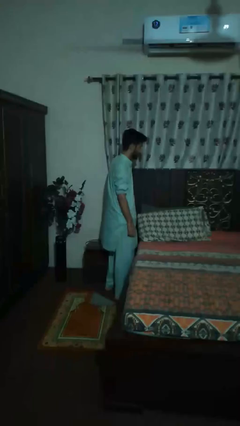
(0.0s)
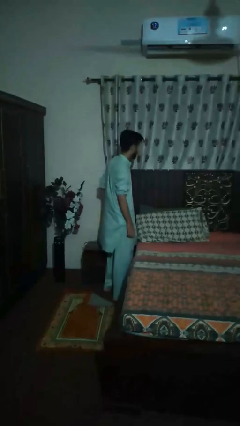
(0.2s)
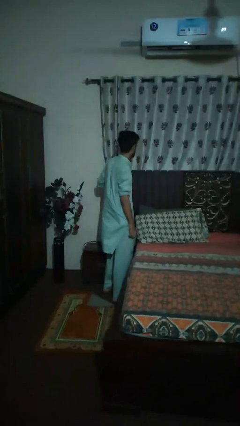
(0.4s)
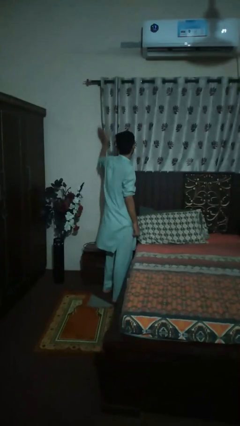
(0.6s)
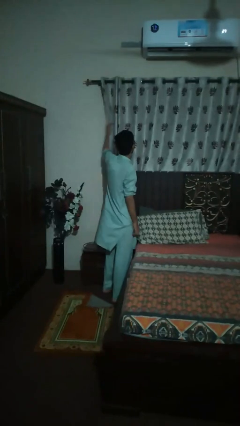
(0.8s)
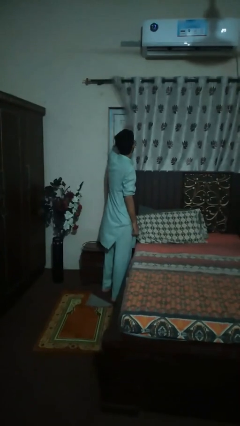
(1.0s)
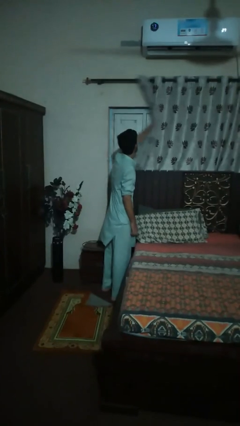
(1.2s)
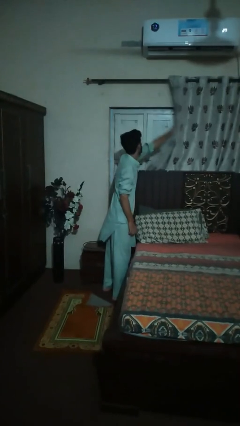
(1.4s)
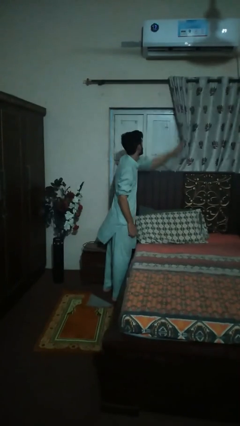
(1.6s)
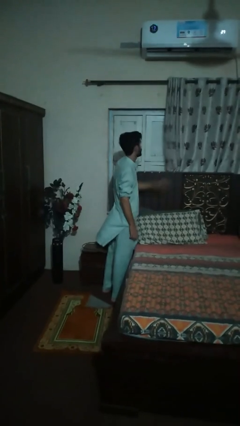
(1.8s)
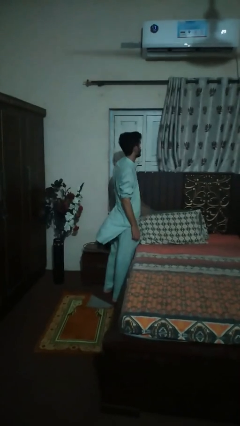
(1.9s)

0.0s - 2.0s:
person opens curtains

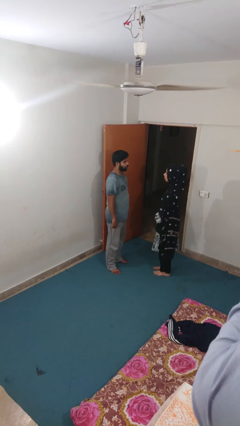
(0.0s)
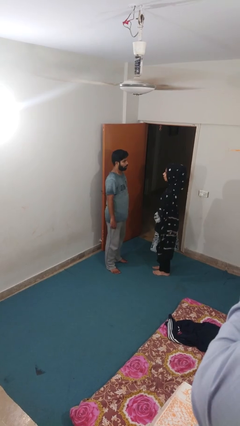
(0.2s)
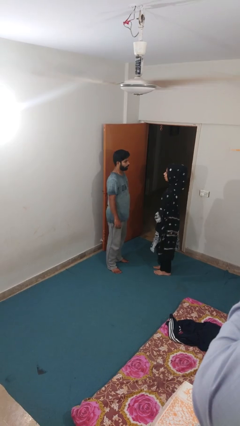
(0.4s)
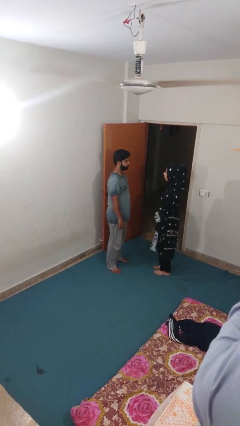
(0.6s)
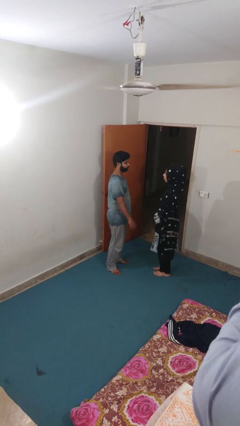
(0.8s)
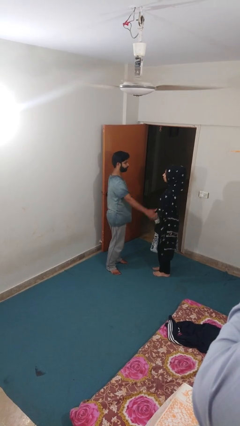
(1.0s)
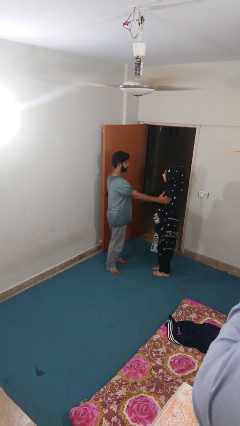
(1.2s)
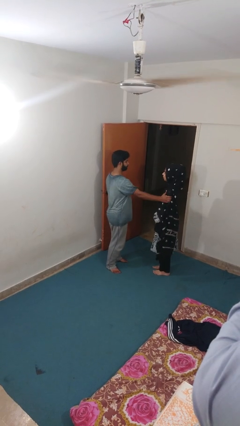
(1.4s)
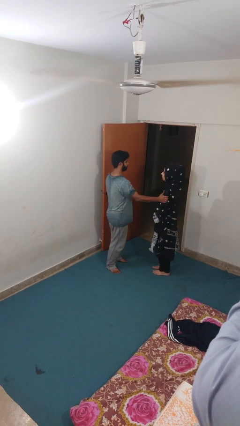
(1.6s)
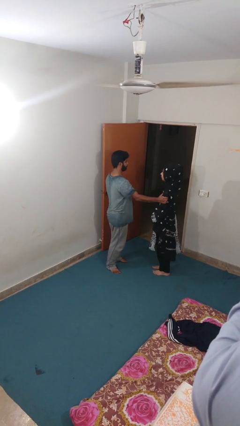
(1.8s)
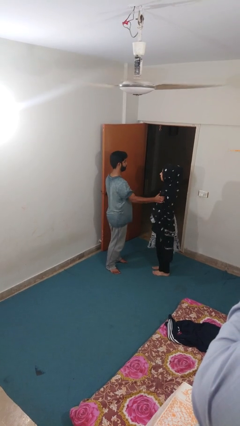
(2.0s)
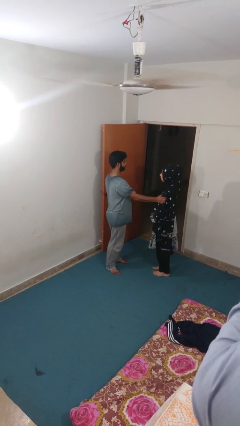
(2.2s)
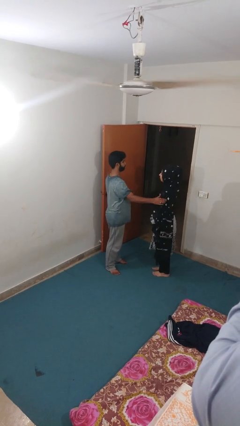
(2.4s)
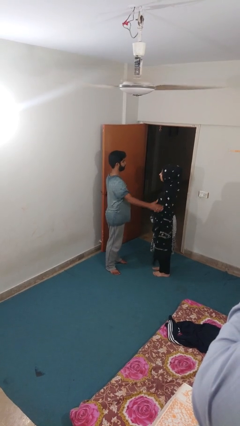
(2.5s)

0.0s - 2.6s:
person grabs person by bicep

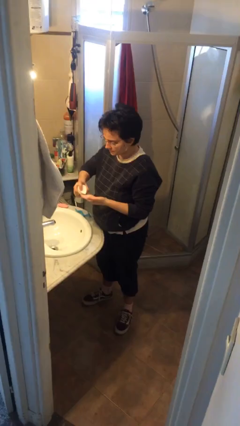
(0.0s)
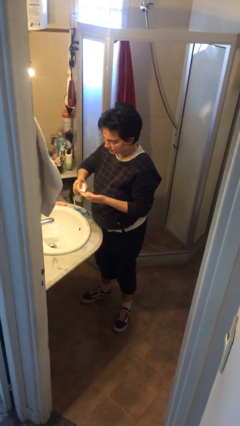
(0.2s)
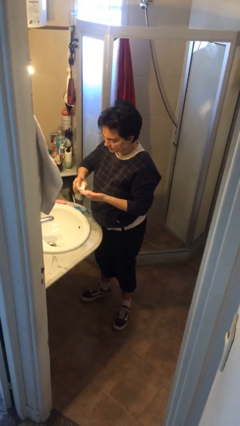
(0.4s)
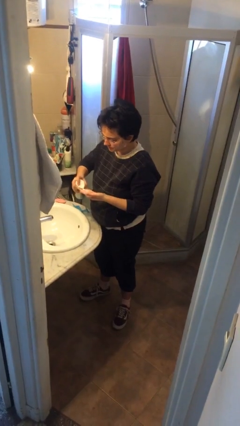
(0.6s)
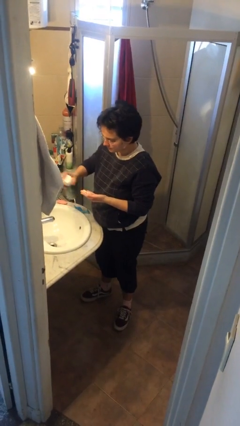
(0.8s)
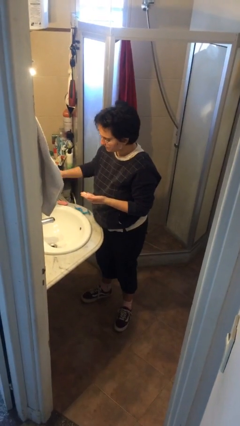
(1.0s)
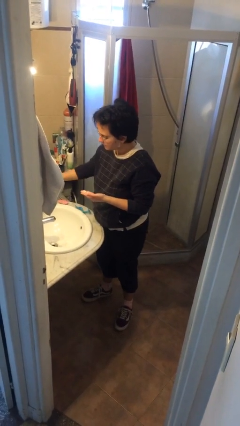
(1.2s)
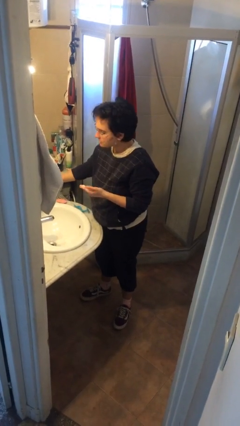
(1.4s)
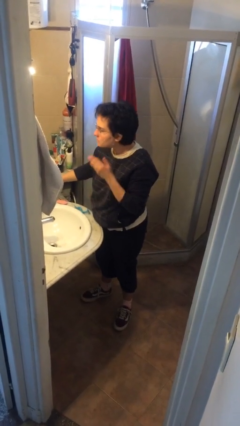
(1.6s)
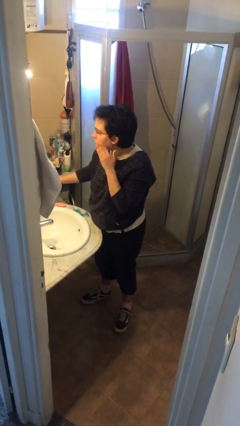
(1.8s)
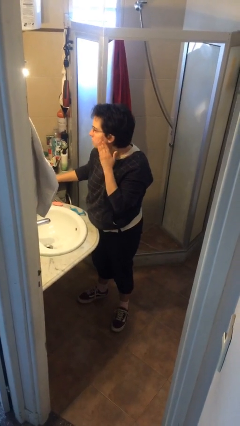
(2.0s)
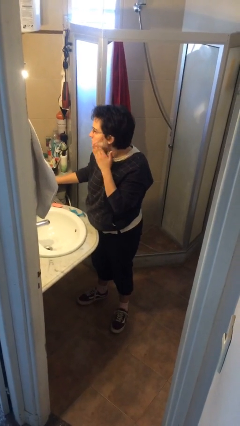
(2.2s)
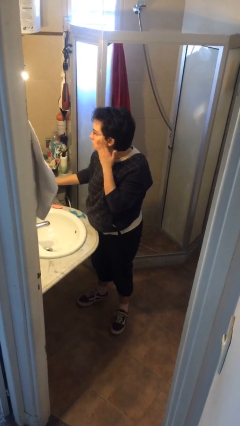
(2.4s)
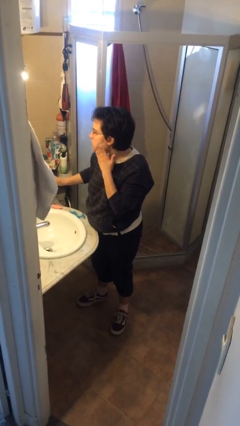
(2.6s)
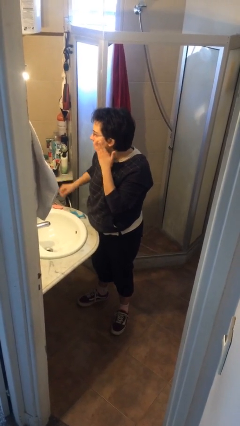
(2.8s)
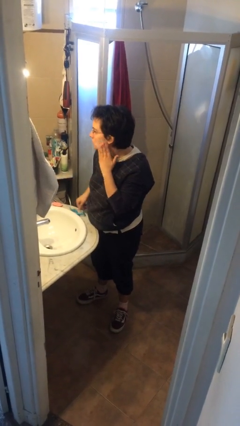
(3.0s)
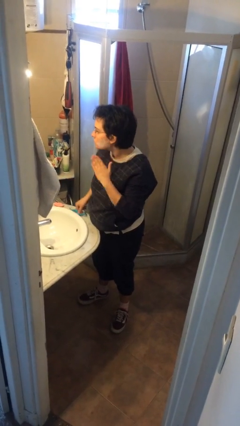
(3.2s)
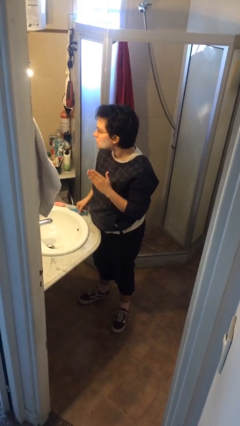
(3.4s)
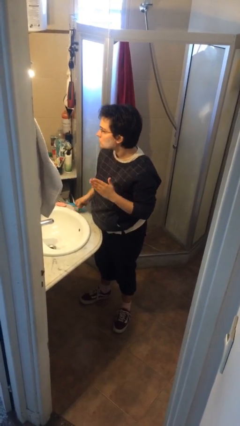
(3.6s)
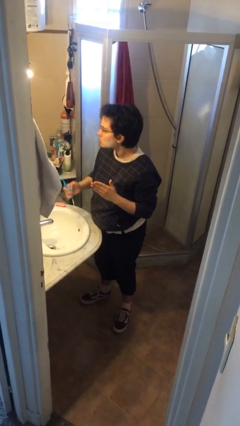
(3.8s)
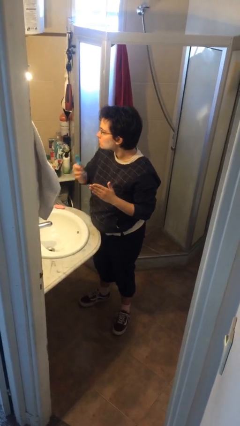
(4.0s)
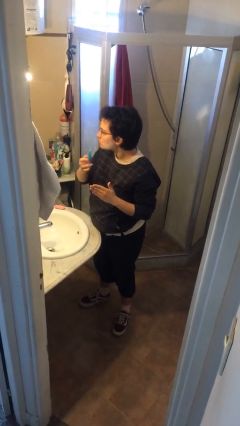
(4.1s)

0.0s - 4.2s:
person applies shaving cream

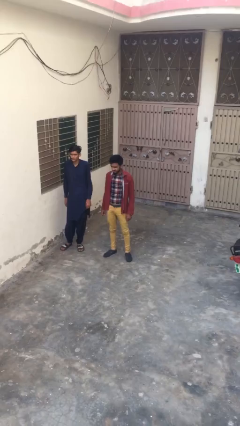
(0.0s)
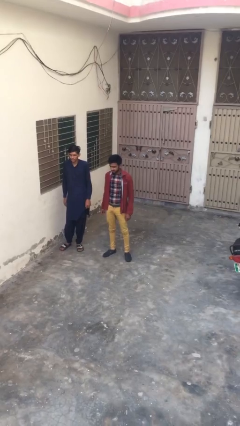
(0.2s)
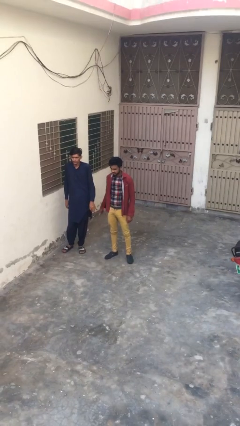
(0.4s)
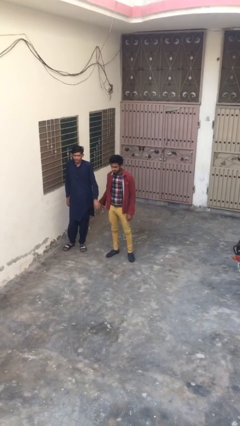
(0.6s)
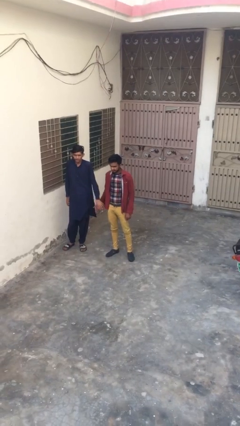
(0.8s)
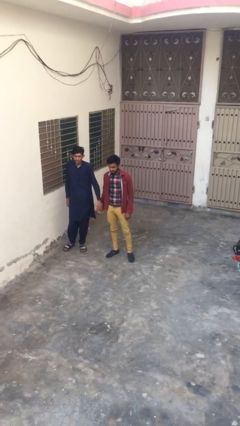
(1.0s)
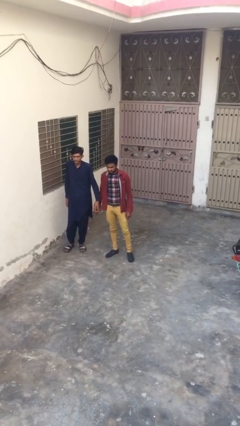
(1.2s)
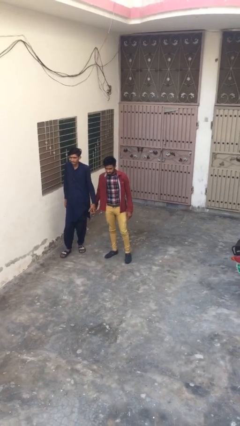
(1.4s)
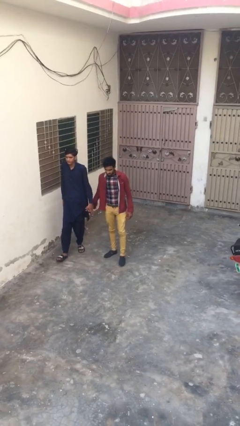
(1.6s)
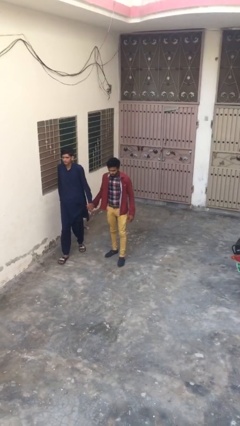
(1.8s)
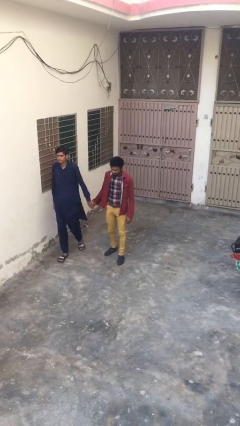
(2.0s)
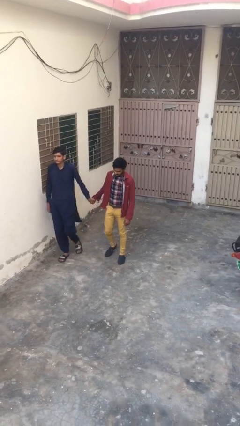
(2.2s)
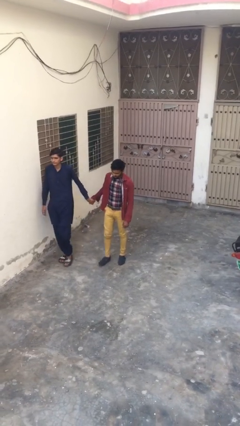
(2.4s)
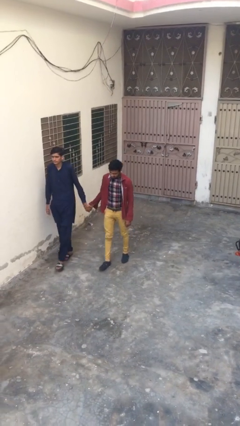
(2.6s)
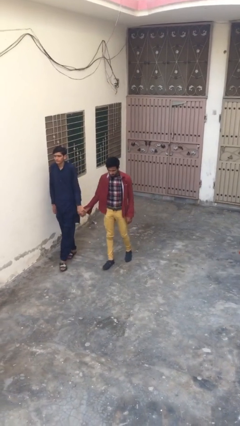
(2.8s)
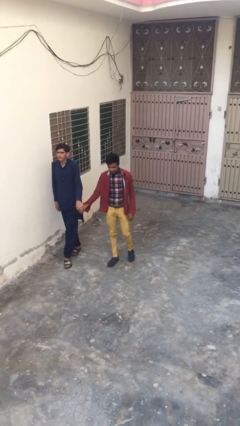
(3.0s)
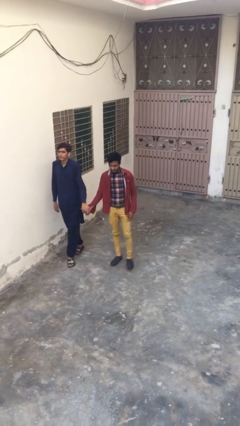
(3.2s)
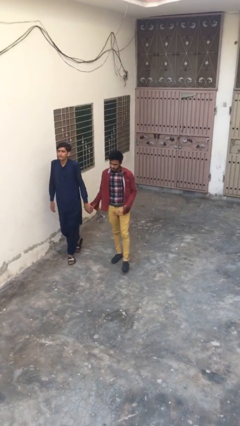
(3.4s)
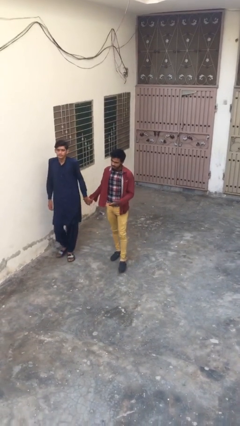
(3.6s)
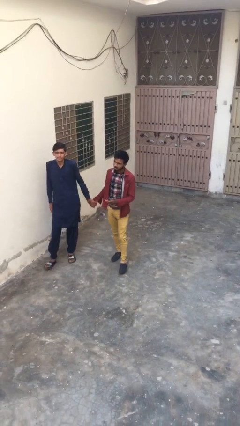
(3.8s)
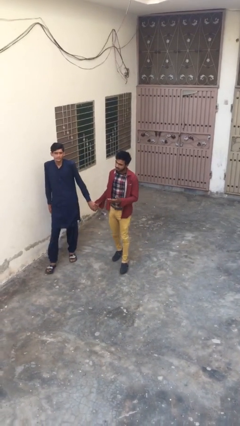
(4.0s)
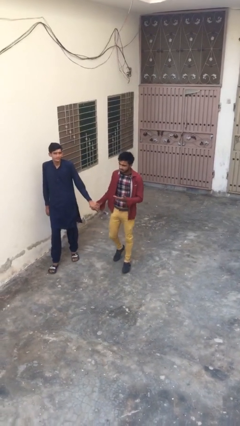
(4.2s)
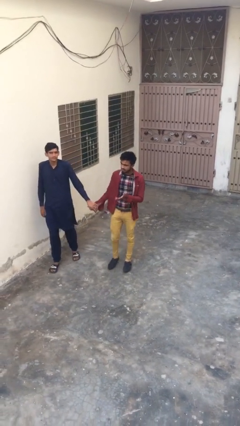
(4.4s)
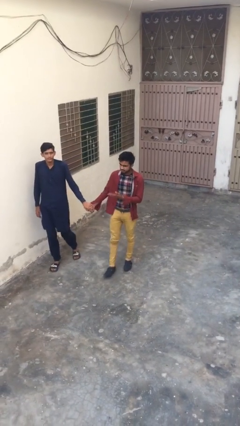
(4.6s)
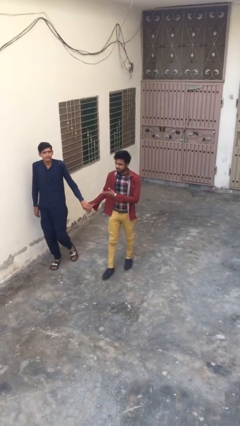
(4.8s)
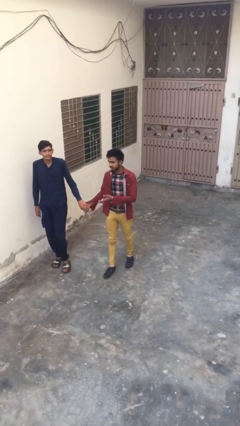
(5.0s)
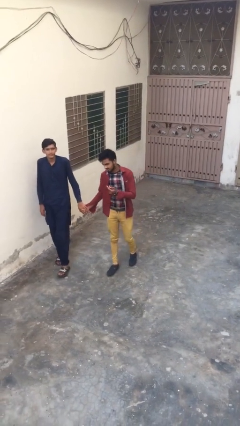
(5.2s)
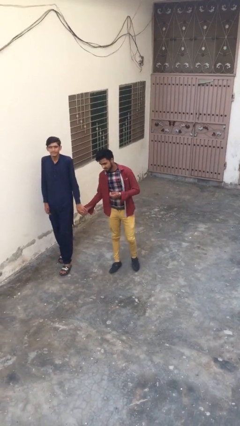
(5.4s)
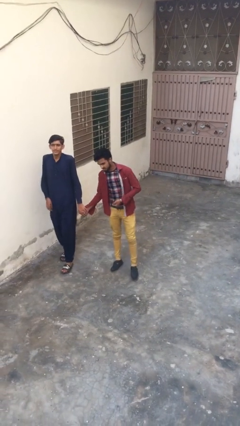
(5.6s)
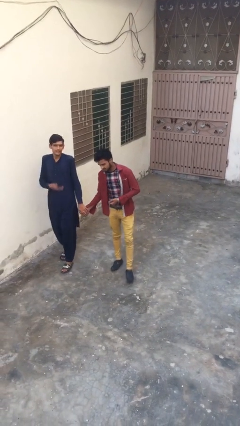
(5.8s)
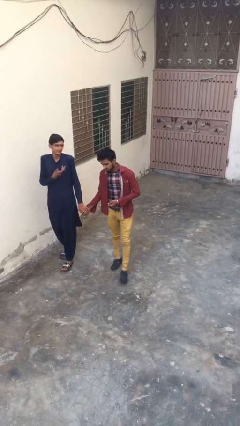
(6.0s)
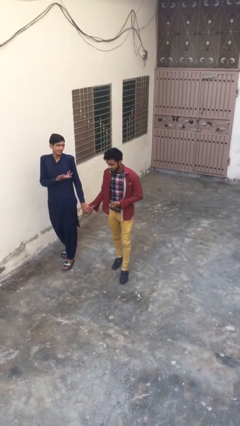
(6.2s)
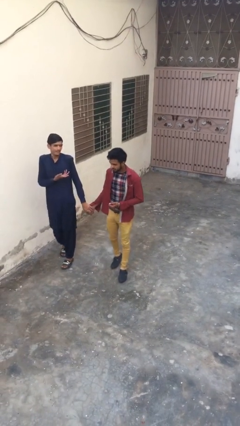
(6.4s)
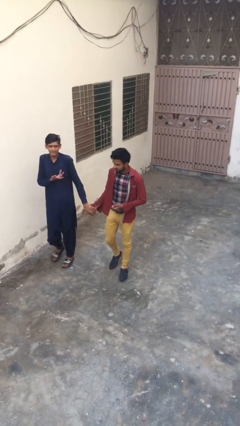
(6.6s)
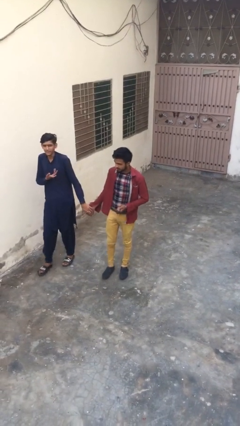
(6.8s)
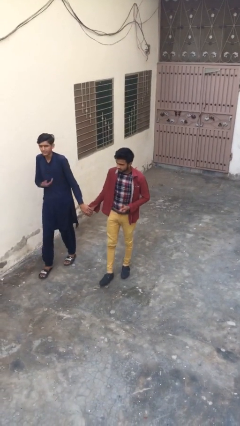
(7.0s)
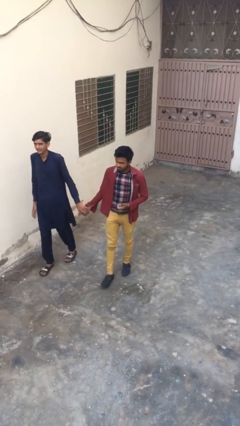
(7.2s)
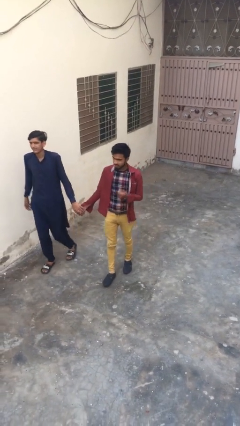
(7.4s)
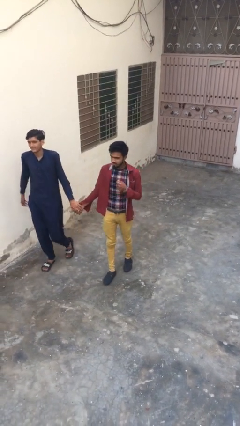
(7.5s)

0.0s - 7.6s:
person holds hand

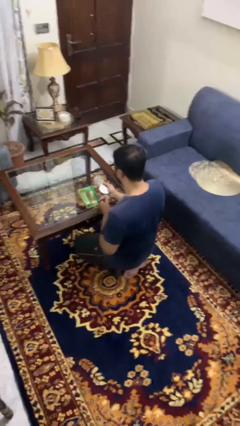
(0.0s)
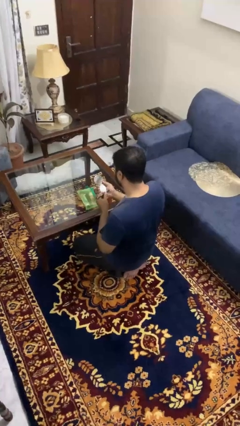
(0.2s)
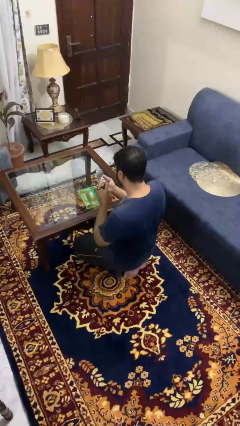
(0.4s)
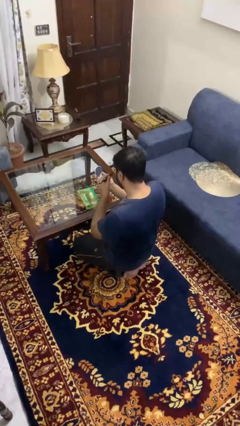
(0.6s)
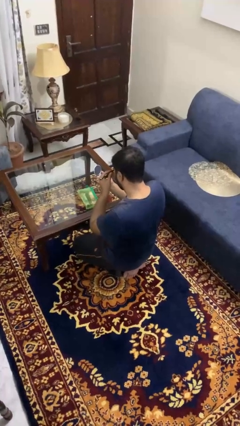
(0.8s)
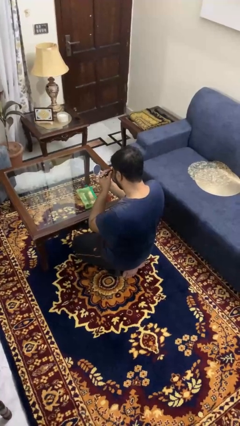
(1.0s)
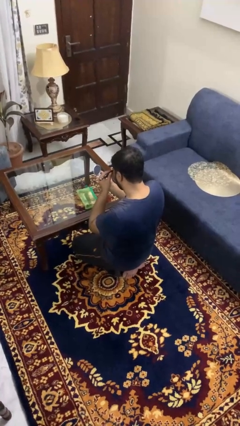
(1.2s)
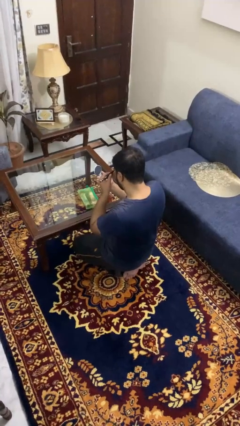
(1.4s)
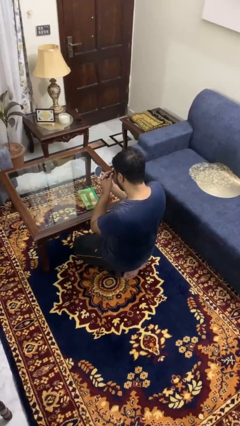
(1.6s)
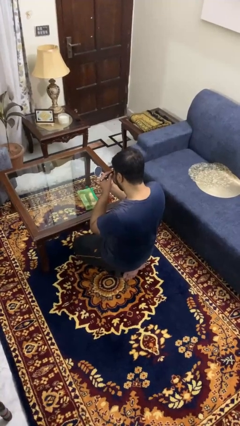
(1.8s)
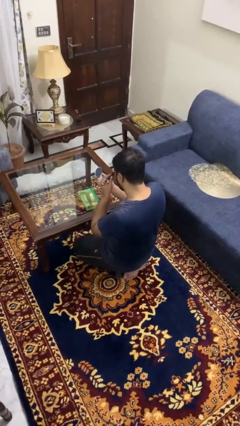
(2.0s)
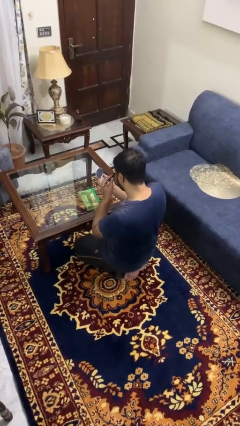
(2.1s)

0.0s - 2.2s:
person applies eye makeup
